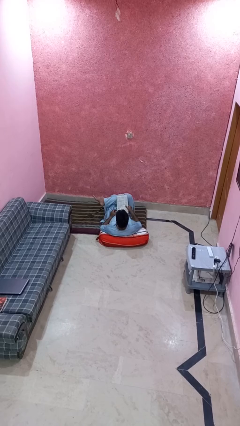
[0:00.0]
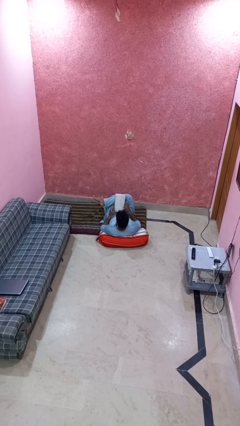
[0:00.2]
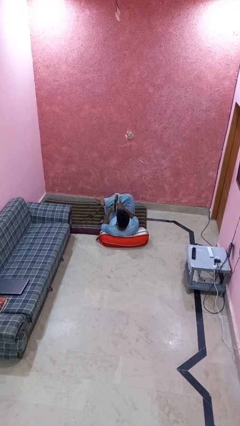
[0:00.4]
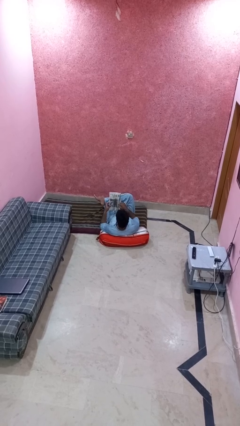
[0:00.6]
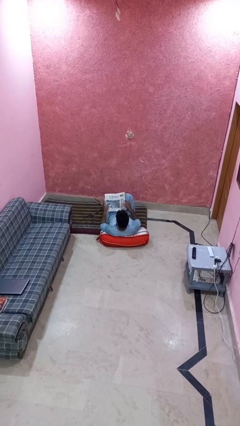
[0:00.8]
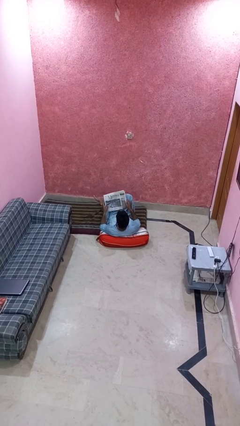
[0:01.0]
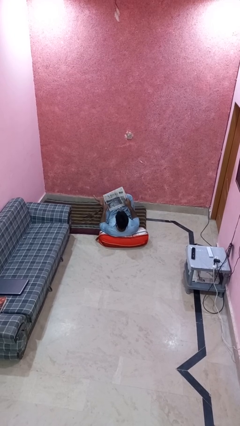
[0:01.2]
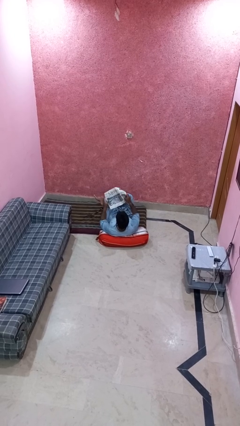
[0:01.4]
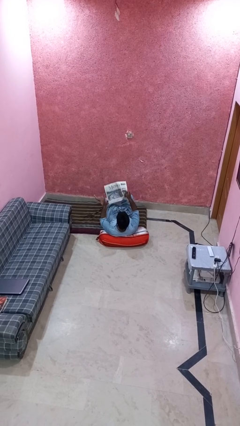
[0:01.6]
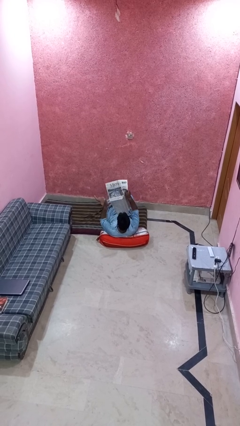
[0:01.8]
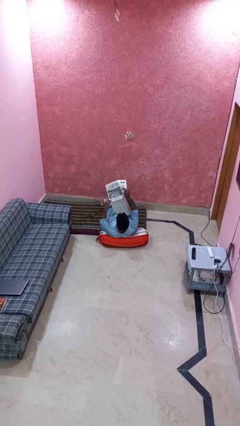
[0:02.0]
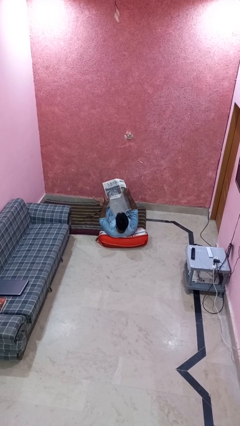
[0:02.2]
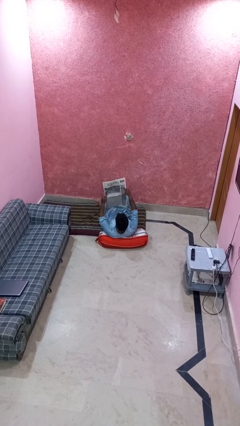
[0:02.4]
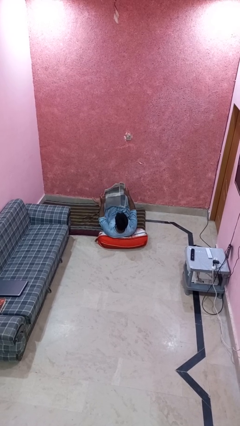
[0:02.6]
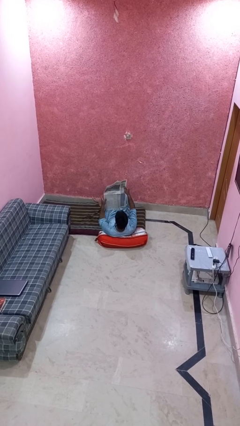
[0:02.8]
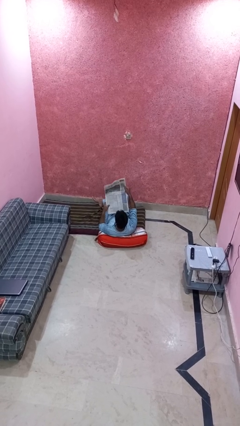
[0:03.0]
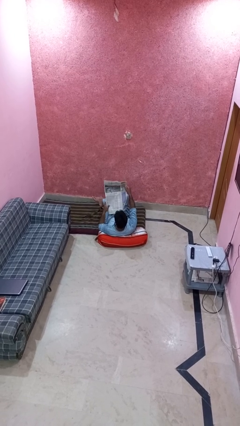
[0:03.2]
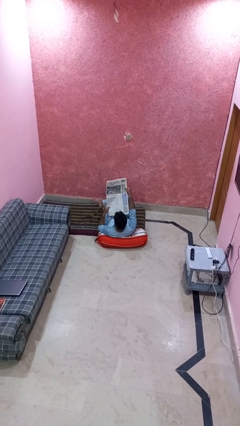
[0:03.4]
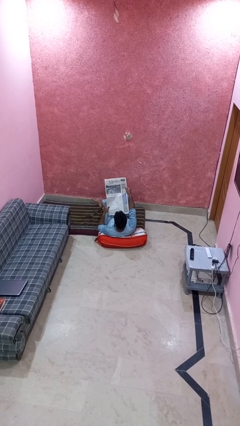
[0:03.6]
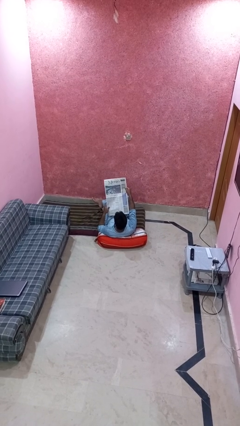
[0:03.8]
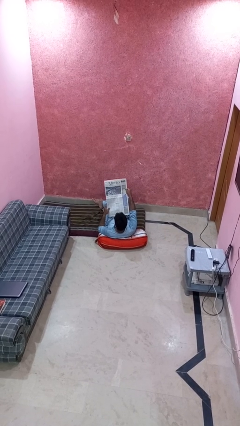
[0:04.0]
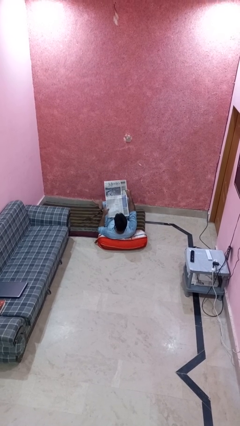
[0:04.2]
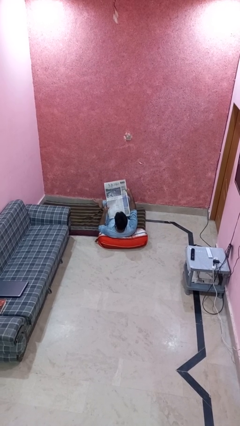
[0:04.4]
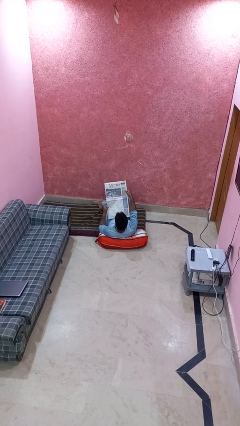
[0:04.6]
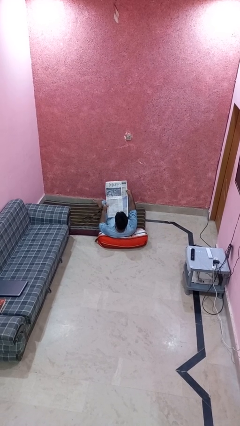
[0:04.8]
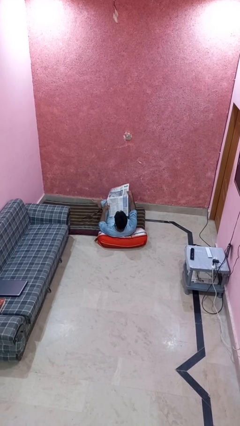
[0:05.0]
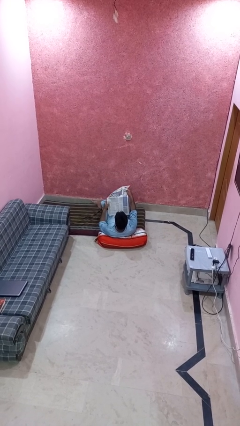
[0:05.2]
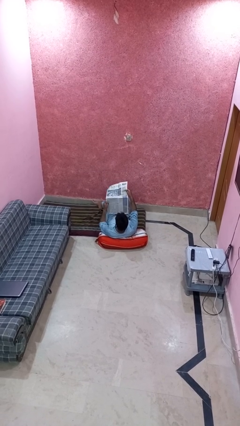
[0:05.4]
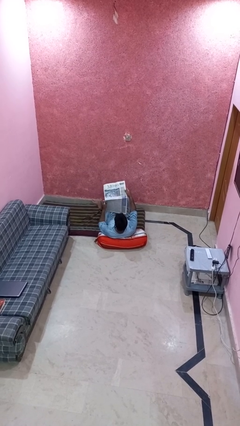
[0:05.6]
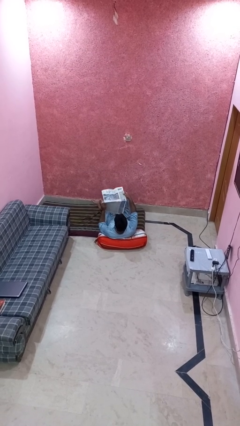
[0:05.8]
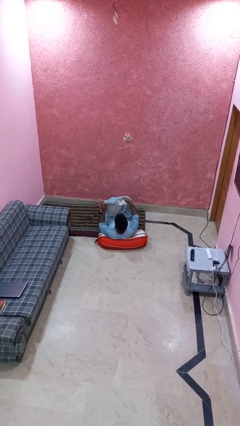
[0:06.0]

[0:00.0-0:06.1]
person reads newspaper

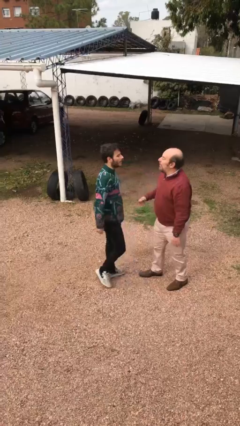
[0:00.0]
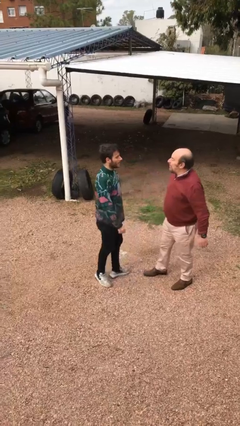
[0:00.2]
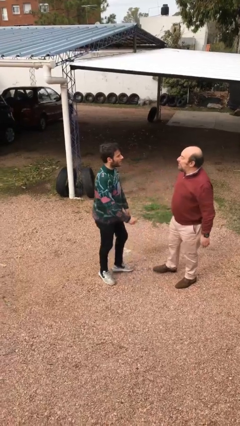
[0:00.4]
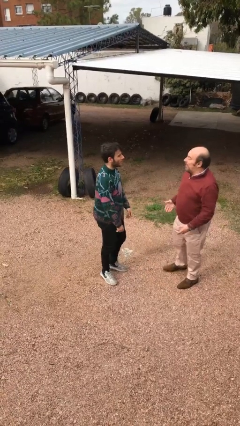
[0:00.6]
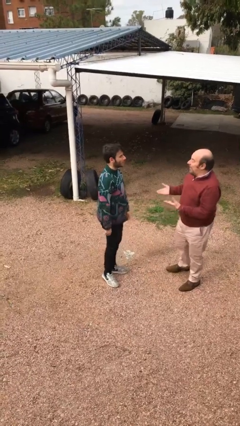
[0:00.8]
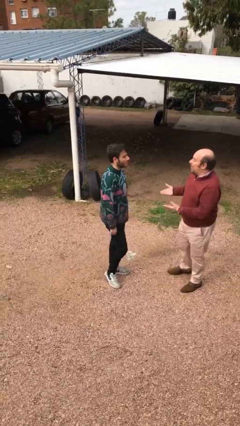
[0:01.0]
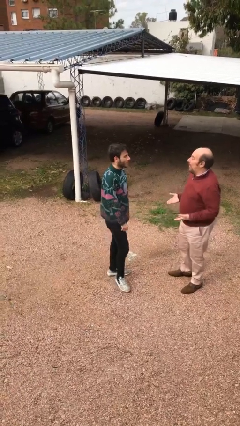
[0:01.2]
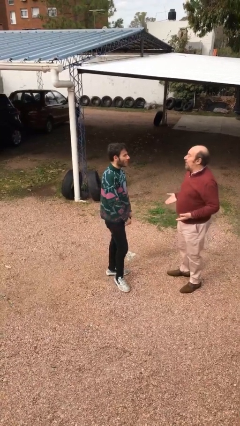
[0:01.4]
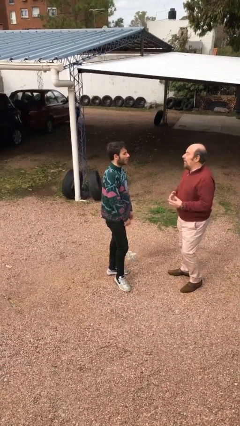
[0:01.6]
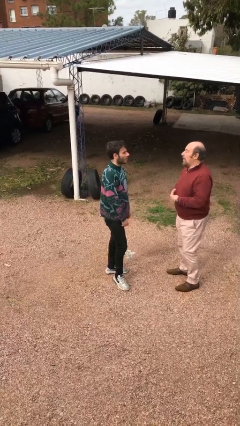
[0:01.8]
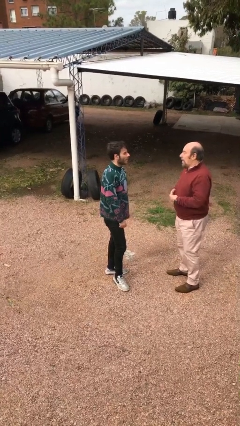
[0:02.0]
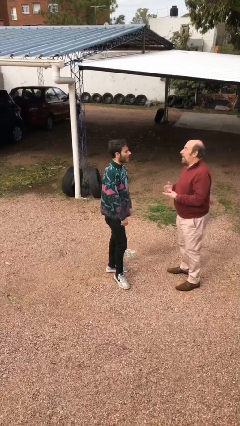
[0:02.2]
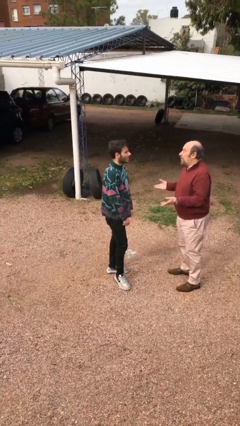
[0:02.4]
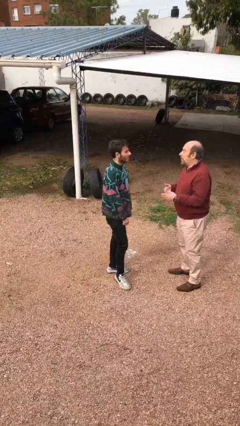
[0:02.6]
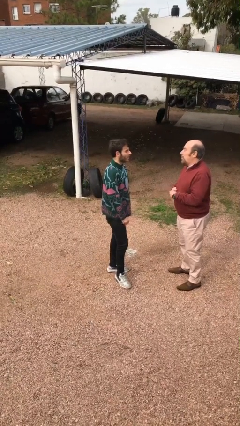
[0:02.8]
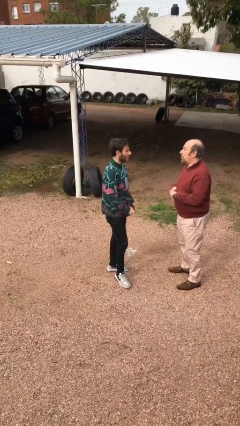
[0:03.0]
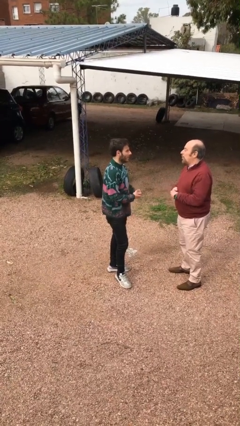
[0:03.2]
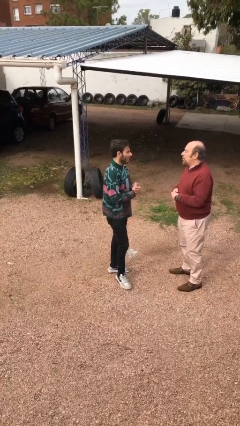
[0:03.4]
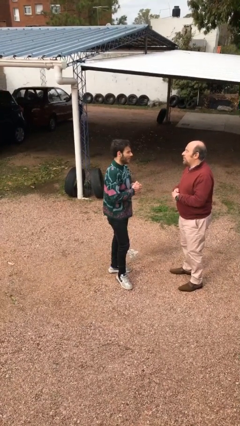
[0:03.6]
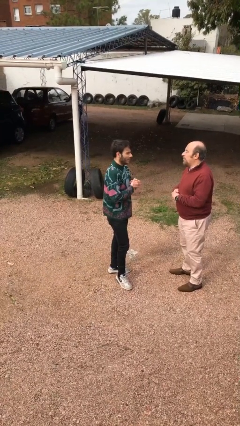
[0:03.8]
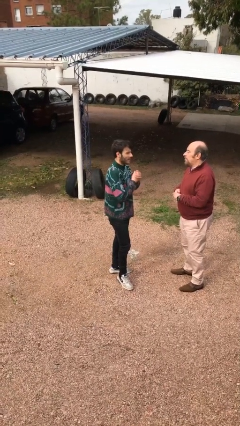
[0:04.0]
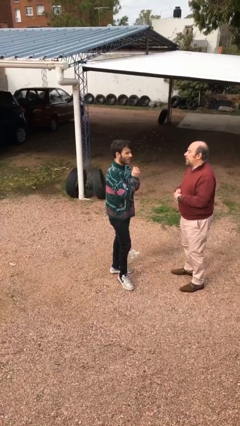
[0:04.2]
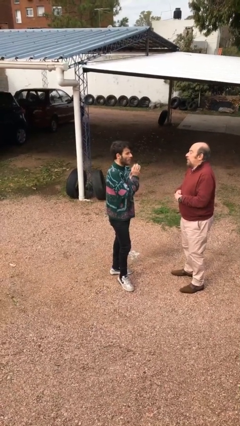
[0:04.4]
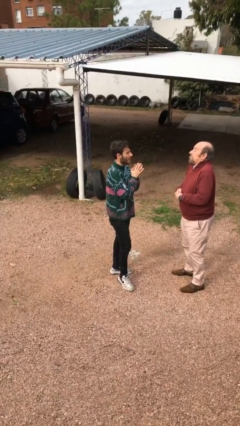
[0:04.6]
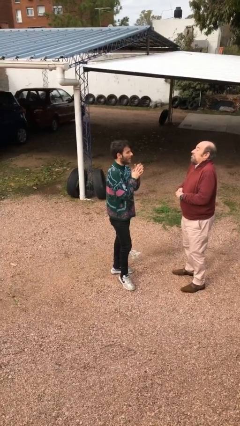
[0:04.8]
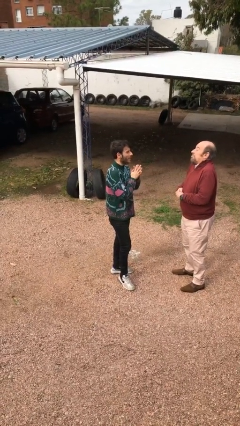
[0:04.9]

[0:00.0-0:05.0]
person talks to person

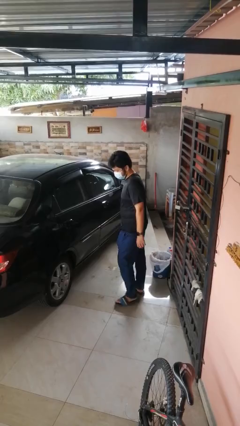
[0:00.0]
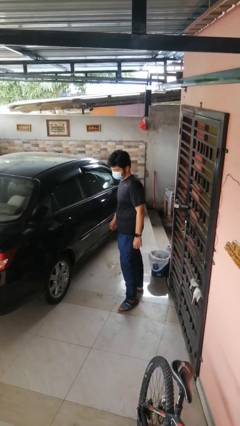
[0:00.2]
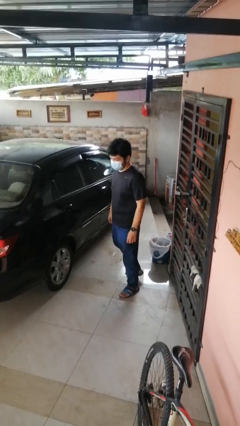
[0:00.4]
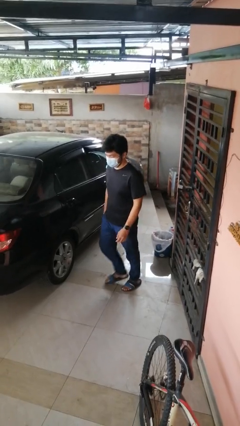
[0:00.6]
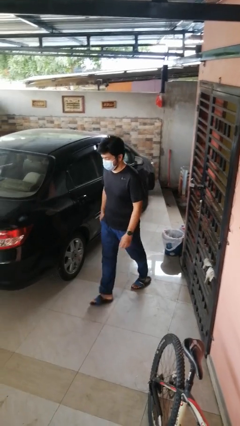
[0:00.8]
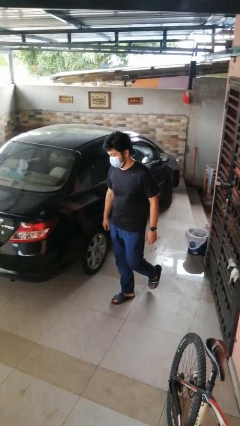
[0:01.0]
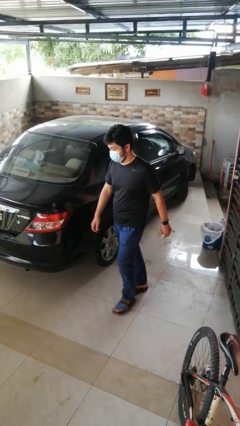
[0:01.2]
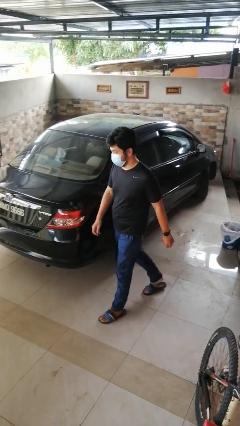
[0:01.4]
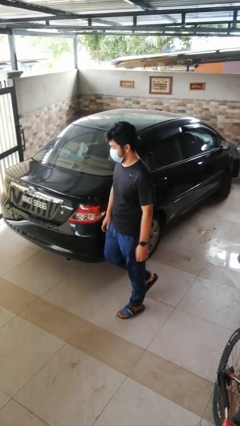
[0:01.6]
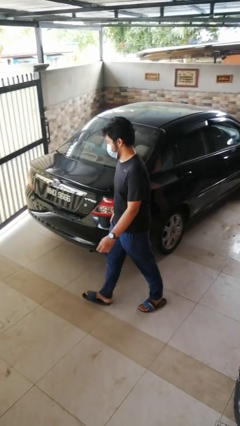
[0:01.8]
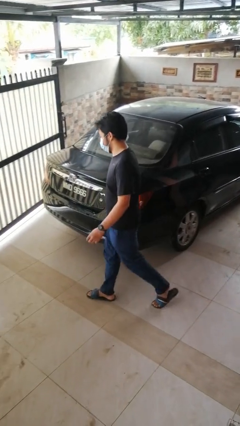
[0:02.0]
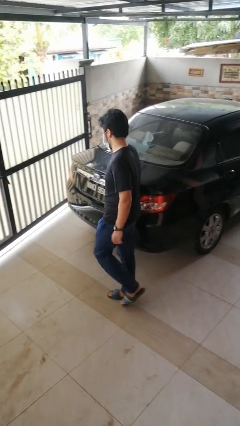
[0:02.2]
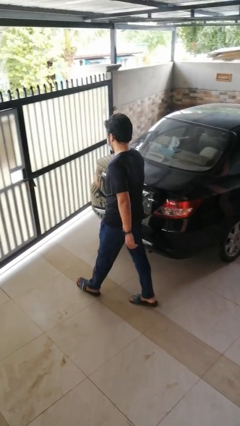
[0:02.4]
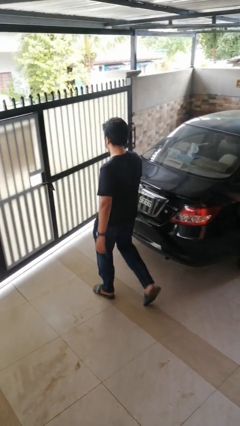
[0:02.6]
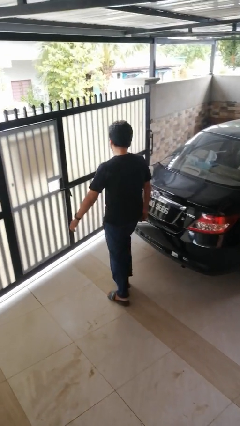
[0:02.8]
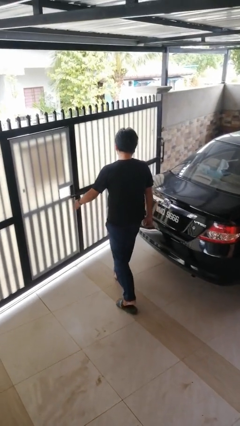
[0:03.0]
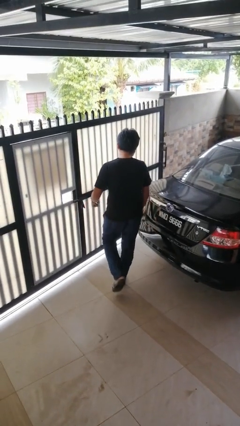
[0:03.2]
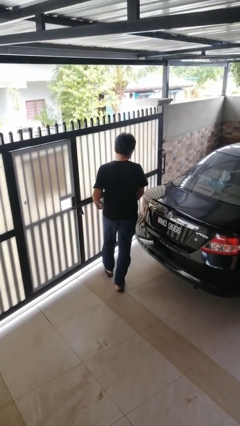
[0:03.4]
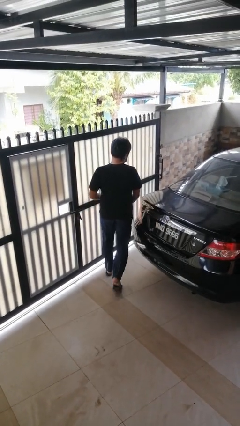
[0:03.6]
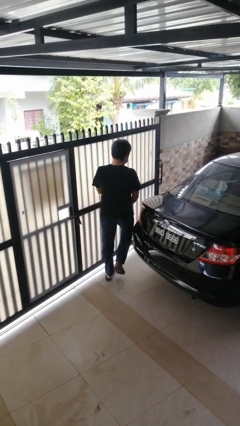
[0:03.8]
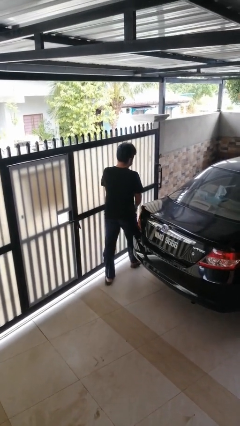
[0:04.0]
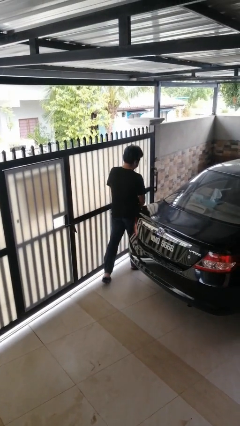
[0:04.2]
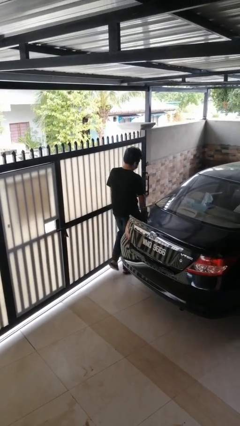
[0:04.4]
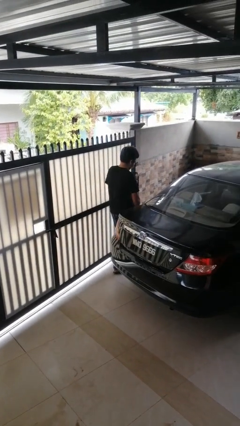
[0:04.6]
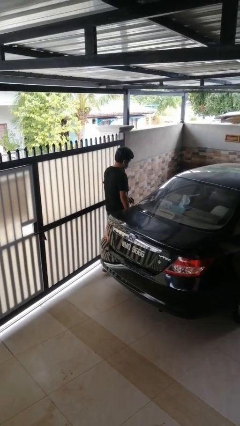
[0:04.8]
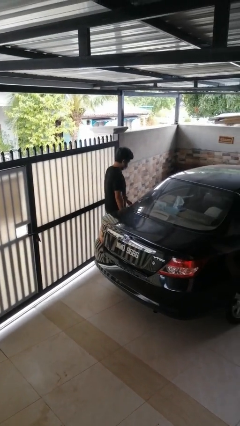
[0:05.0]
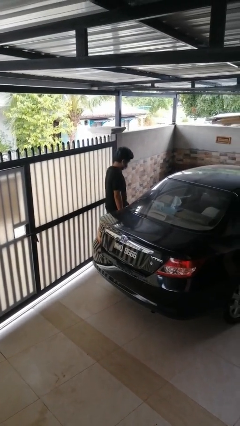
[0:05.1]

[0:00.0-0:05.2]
person walks around car

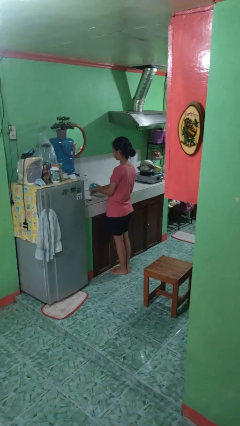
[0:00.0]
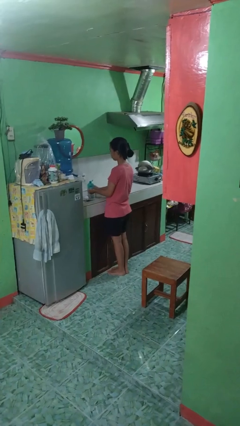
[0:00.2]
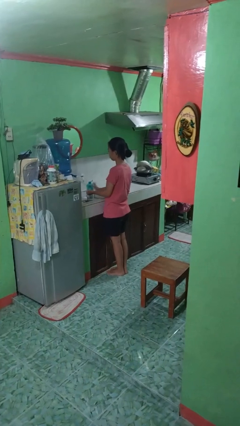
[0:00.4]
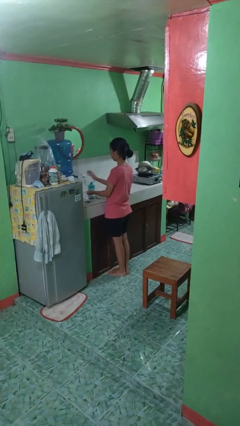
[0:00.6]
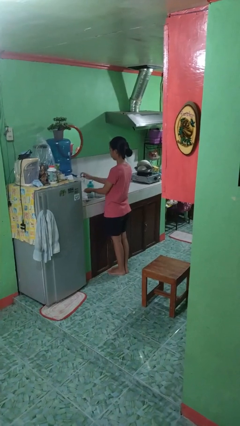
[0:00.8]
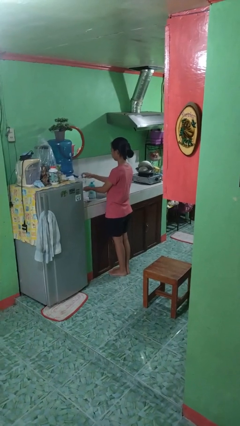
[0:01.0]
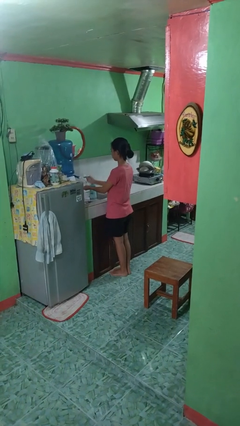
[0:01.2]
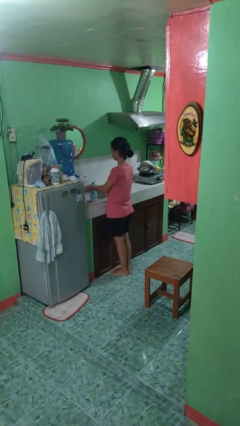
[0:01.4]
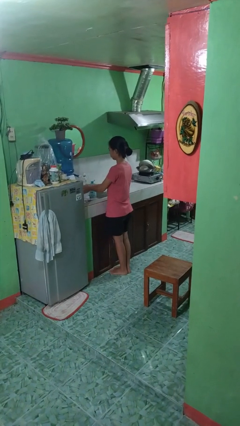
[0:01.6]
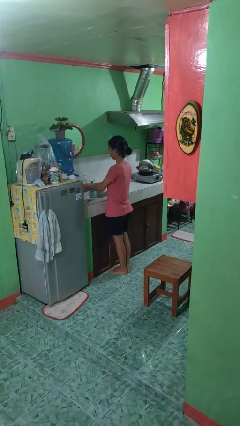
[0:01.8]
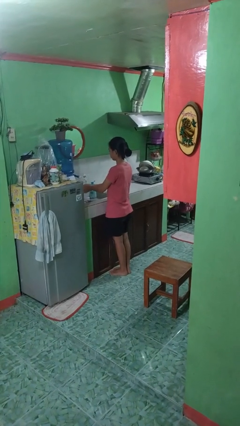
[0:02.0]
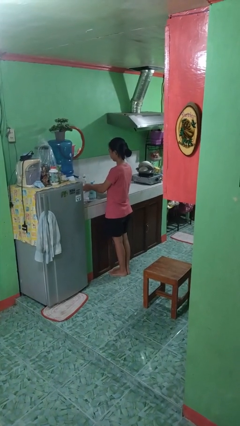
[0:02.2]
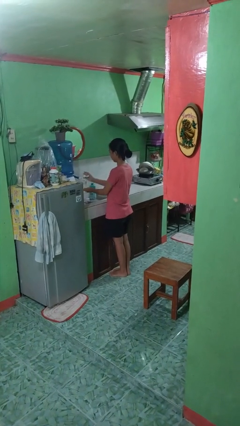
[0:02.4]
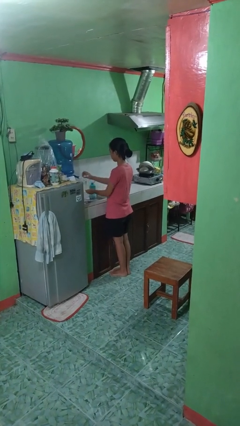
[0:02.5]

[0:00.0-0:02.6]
person washes hands
